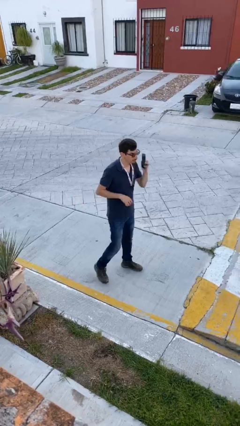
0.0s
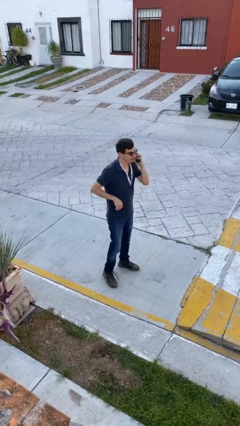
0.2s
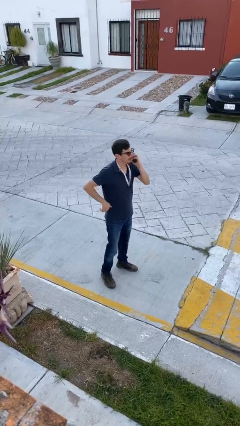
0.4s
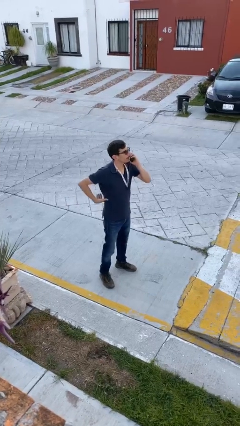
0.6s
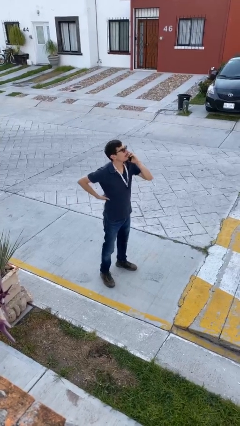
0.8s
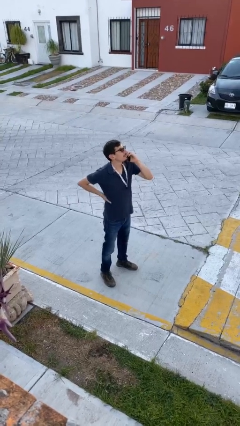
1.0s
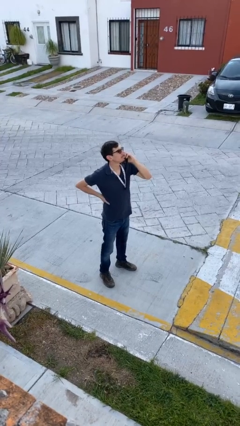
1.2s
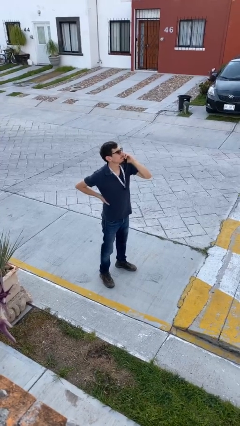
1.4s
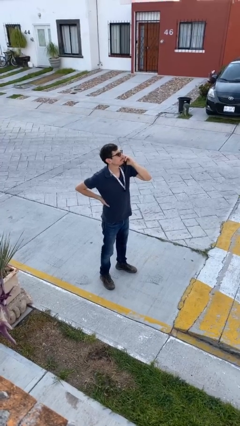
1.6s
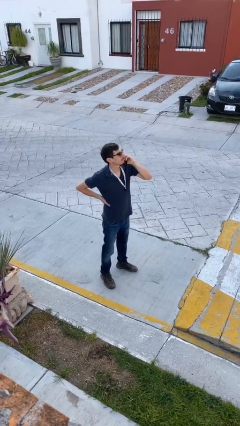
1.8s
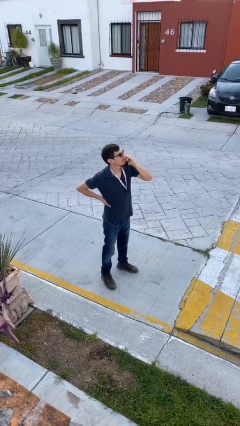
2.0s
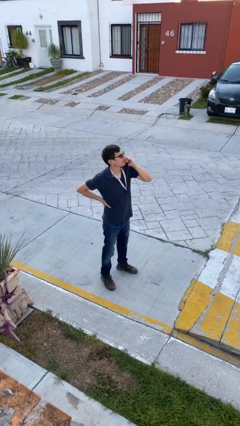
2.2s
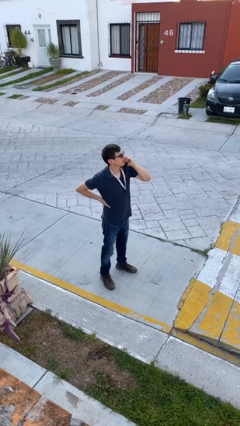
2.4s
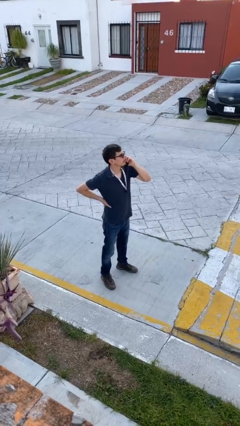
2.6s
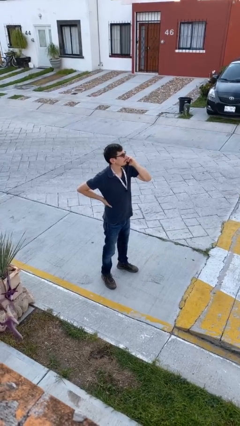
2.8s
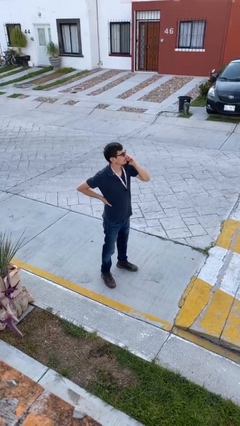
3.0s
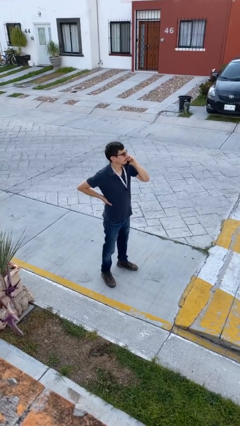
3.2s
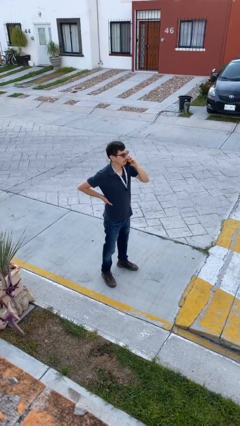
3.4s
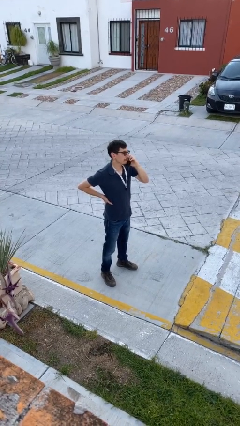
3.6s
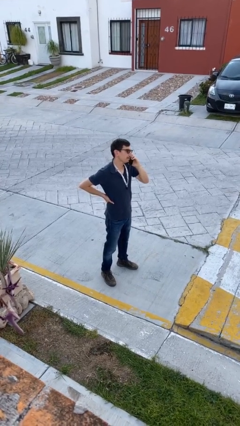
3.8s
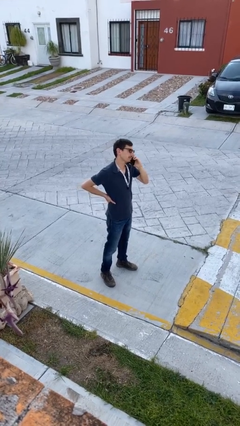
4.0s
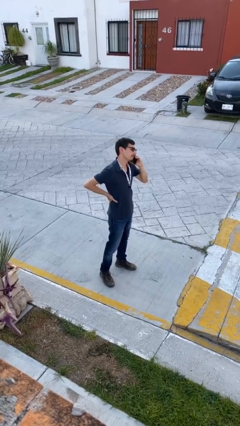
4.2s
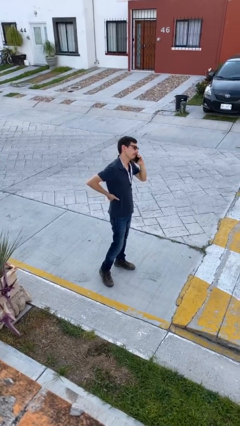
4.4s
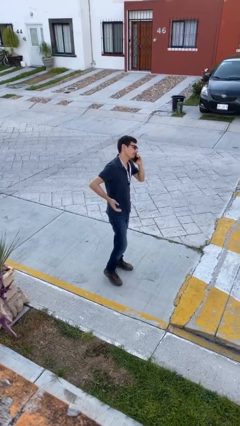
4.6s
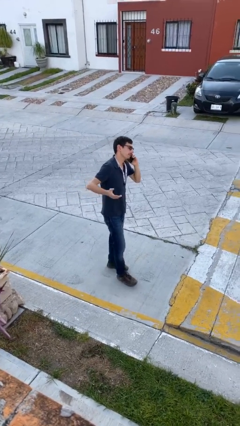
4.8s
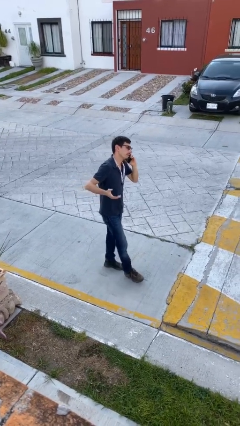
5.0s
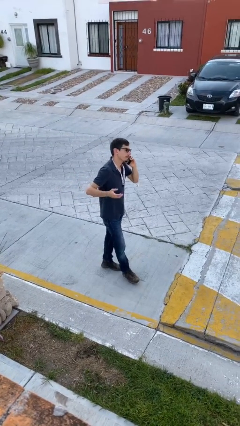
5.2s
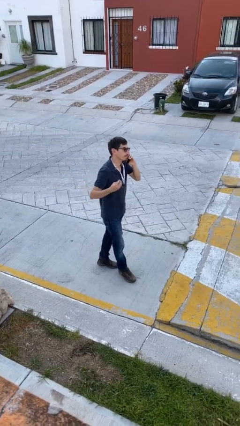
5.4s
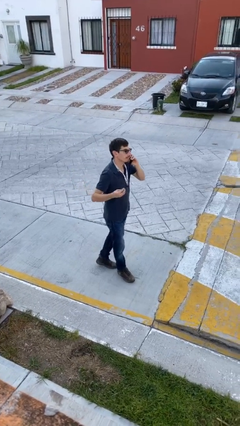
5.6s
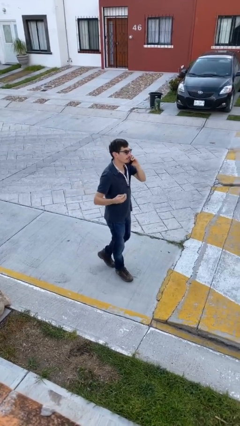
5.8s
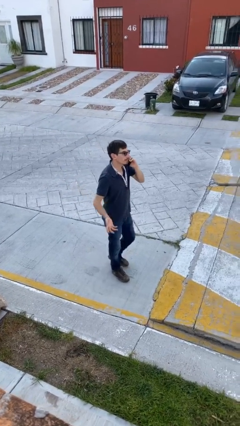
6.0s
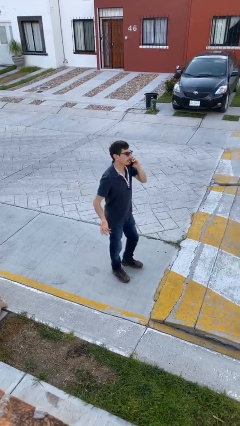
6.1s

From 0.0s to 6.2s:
person talks on phone

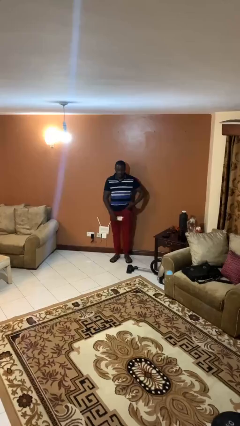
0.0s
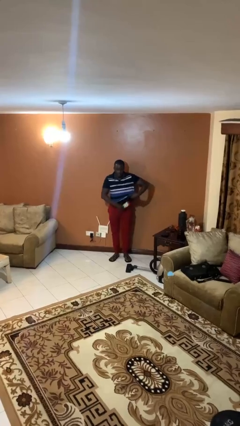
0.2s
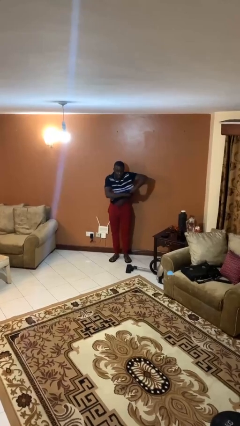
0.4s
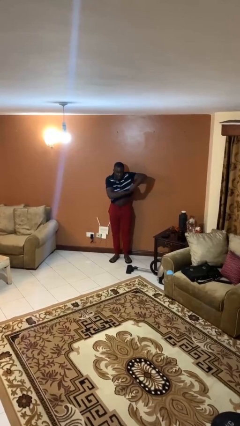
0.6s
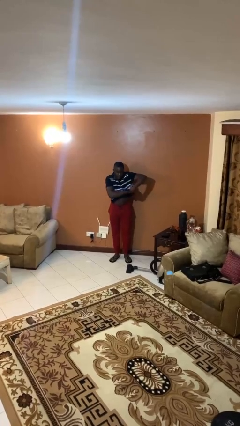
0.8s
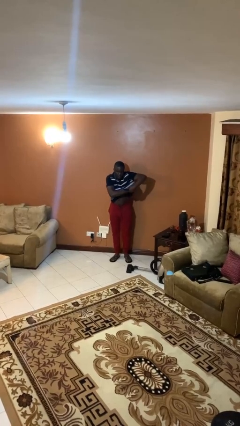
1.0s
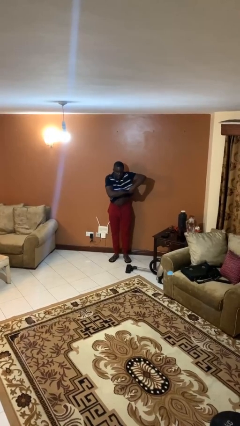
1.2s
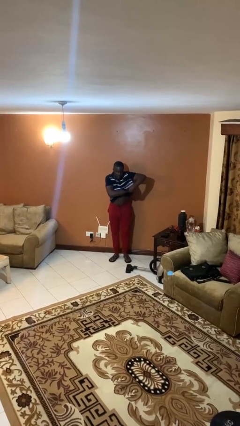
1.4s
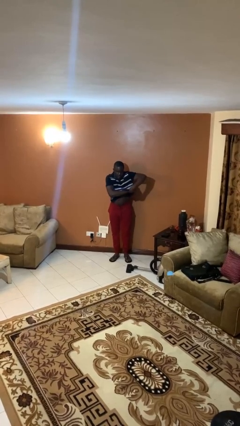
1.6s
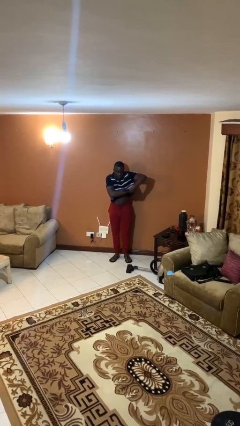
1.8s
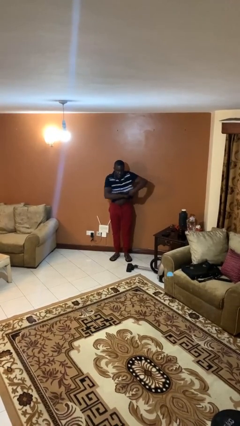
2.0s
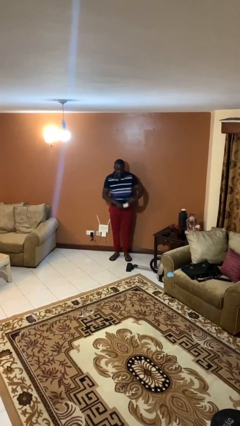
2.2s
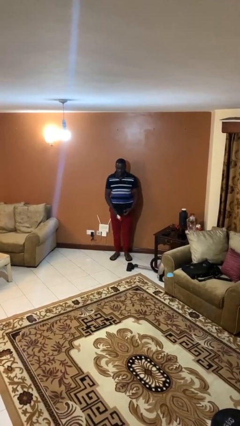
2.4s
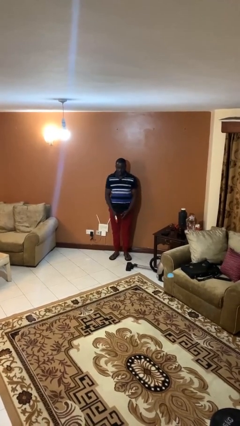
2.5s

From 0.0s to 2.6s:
person applies deodorant

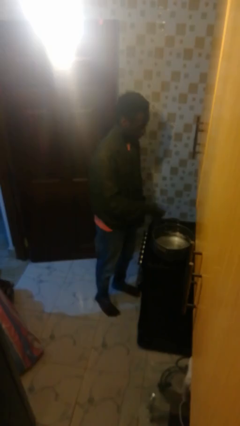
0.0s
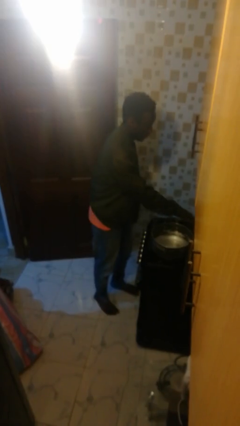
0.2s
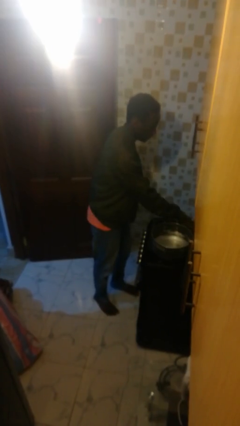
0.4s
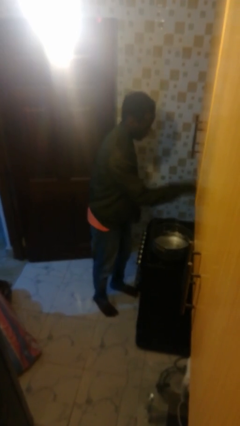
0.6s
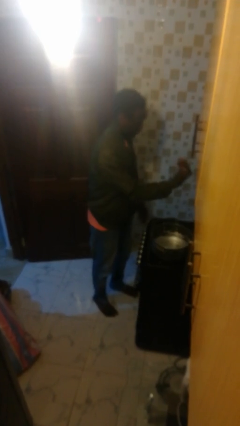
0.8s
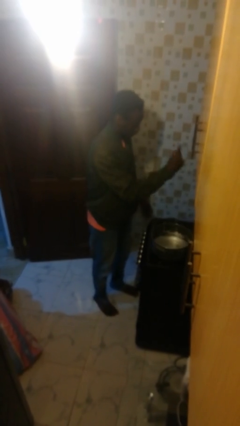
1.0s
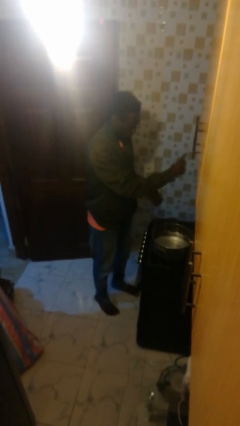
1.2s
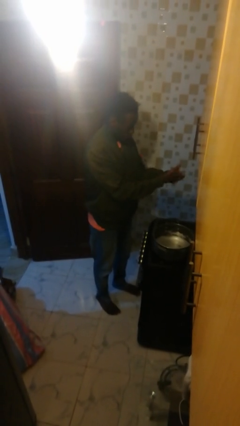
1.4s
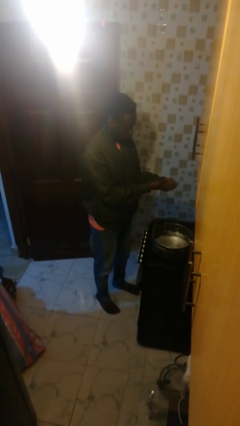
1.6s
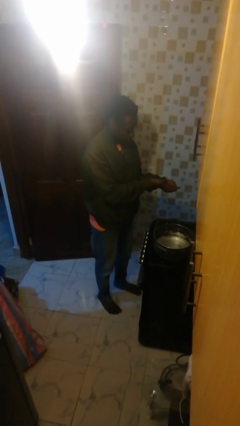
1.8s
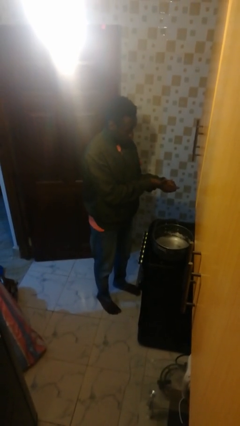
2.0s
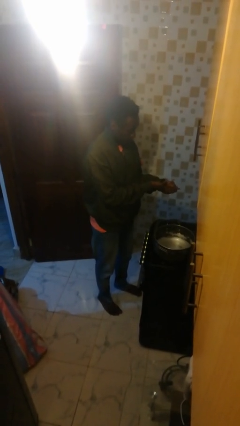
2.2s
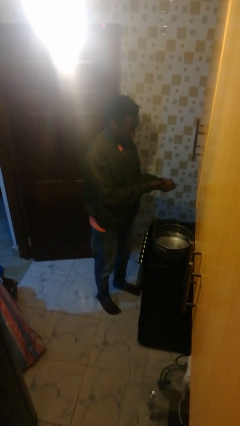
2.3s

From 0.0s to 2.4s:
person burns hand

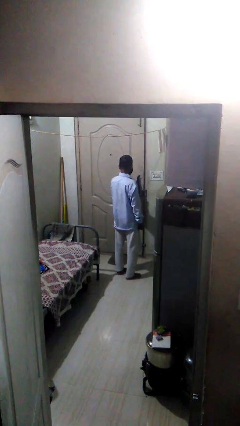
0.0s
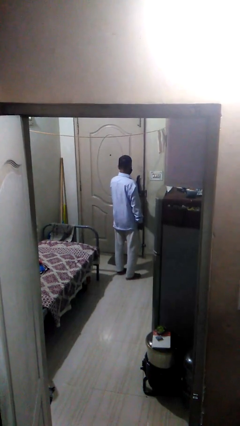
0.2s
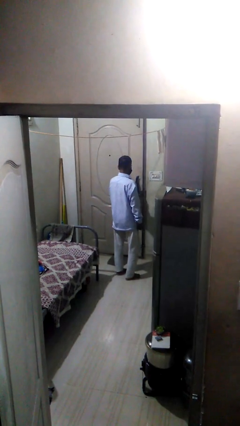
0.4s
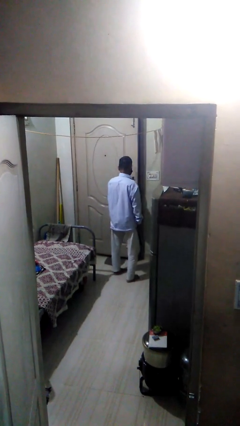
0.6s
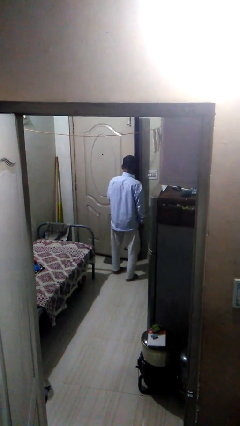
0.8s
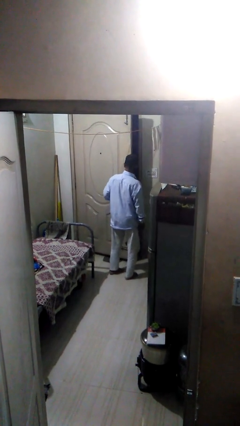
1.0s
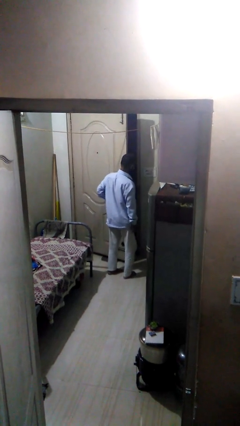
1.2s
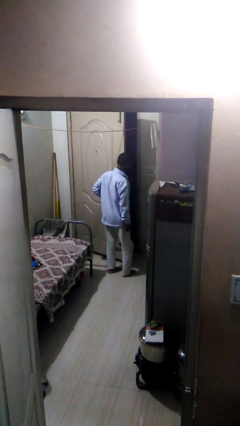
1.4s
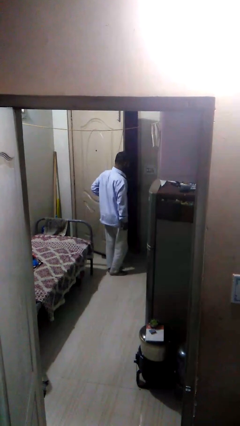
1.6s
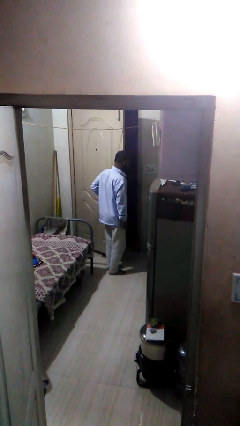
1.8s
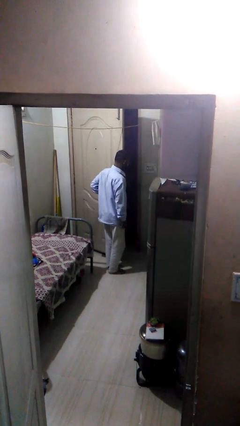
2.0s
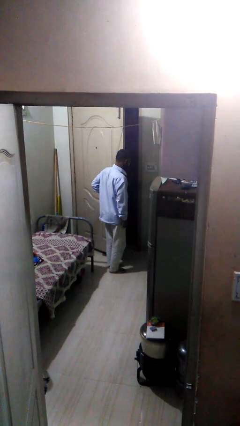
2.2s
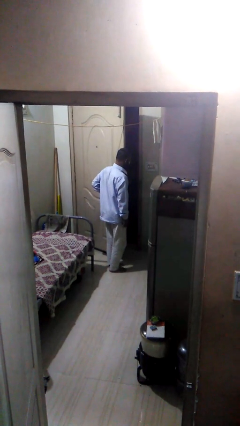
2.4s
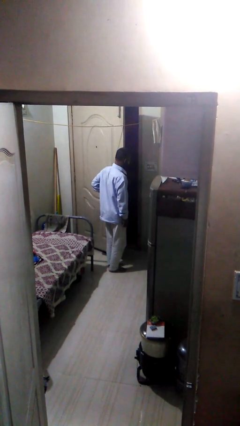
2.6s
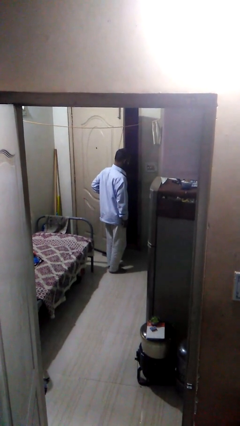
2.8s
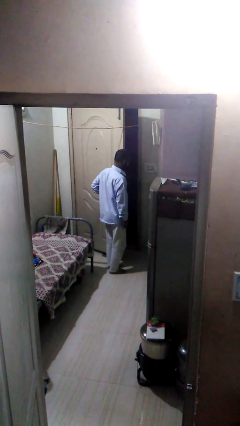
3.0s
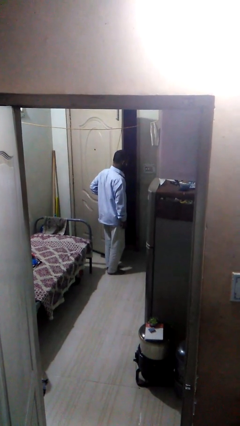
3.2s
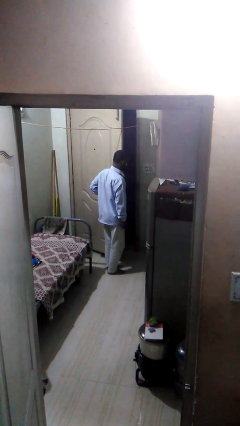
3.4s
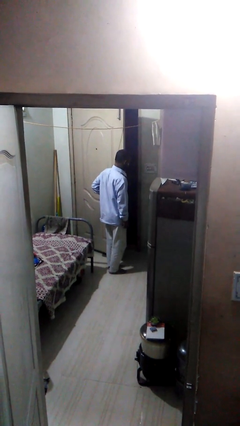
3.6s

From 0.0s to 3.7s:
person opens facility door

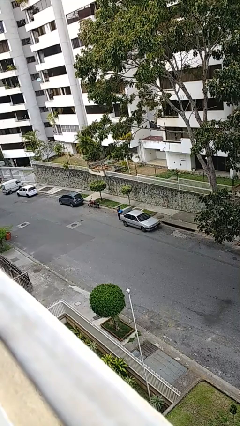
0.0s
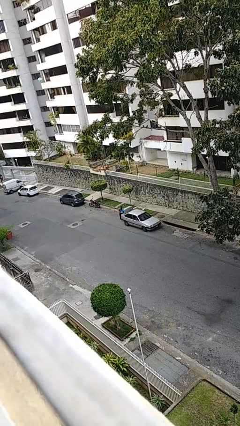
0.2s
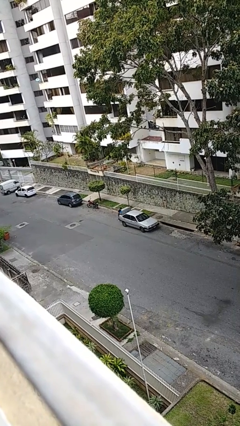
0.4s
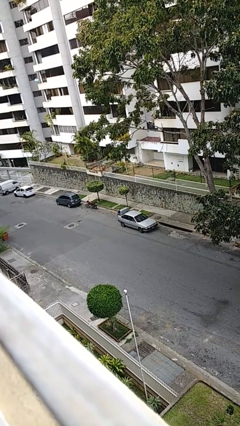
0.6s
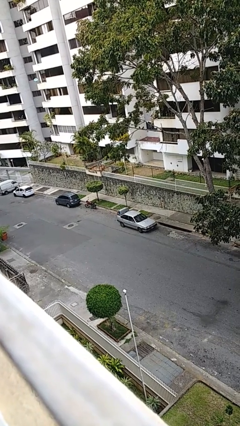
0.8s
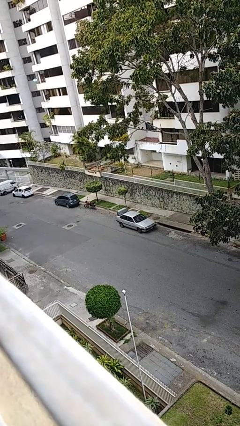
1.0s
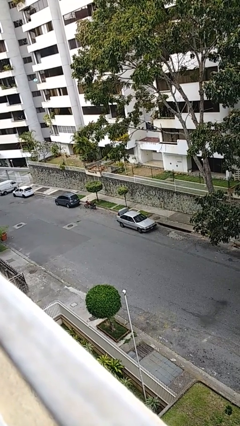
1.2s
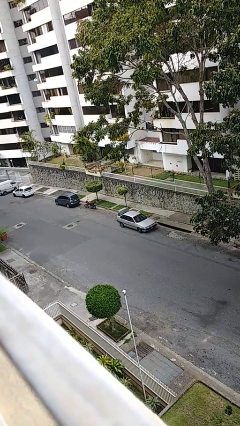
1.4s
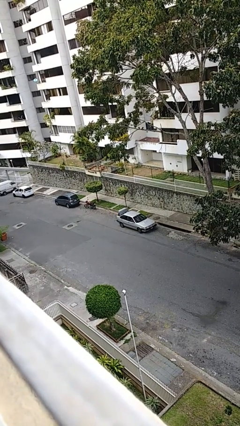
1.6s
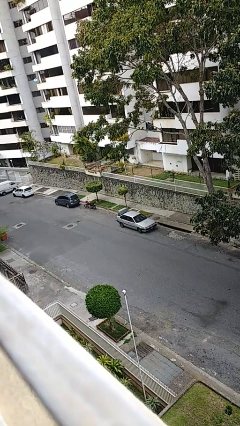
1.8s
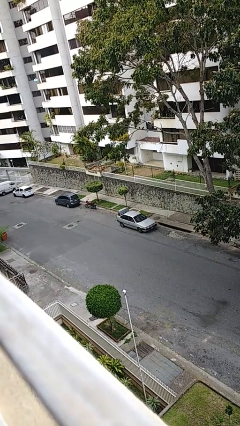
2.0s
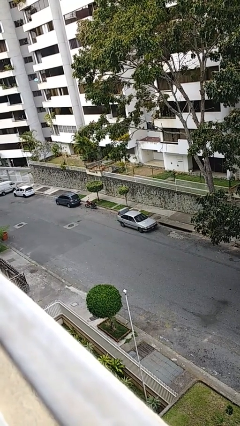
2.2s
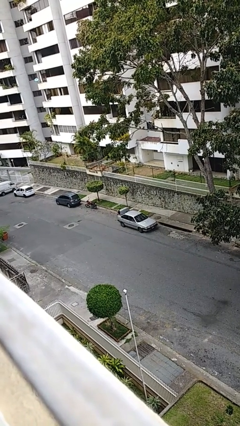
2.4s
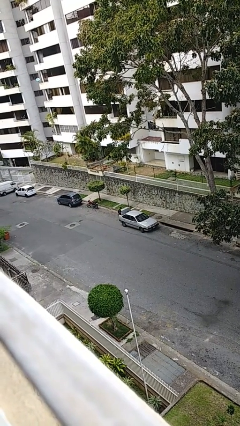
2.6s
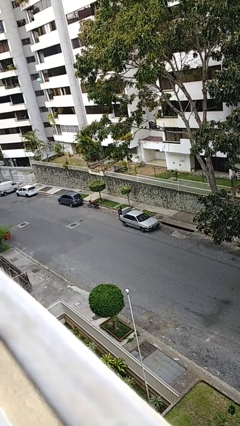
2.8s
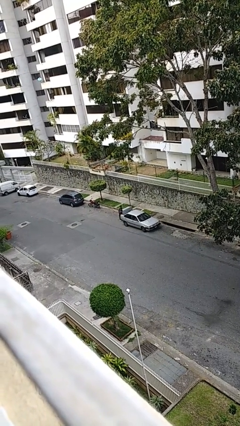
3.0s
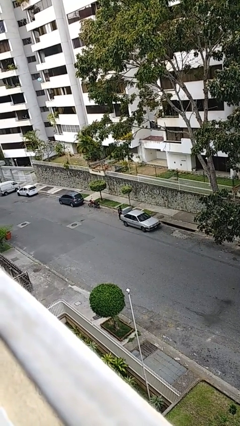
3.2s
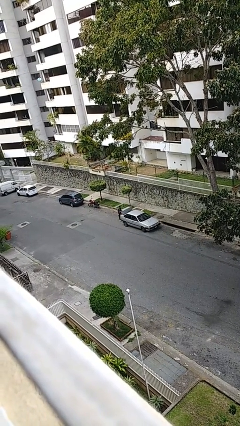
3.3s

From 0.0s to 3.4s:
person loads car
